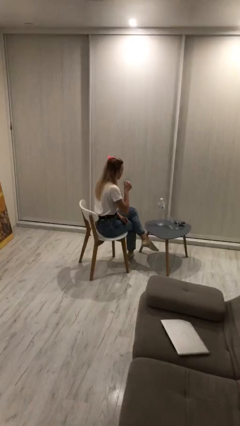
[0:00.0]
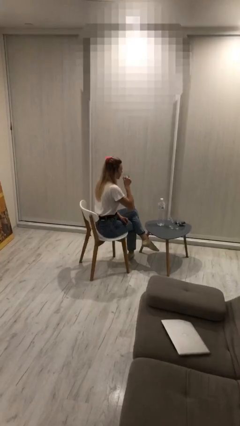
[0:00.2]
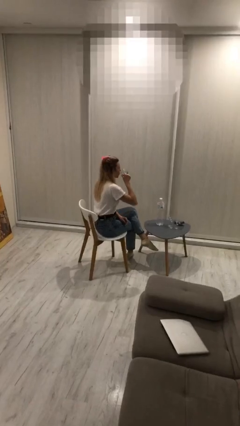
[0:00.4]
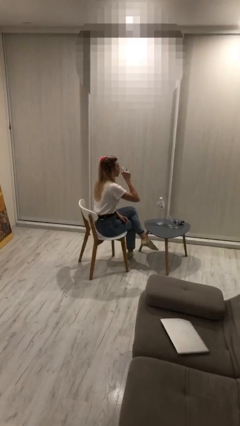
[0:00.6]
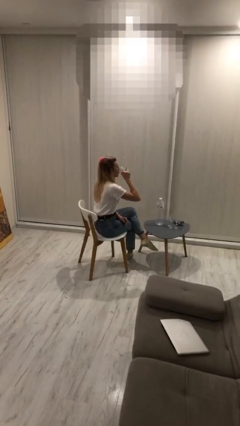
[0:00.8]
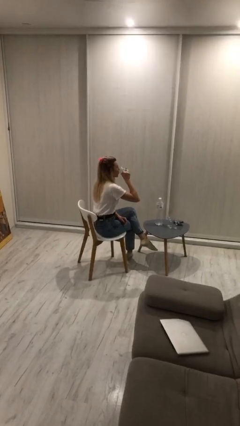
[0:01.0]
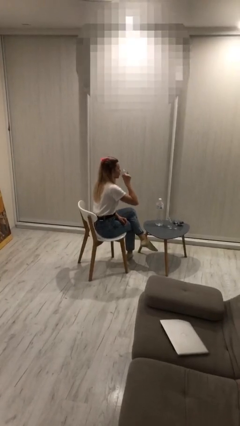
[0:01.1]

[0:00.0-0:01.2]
person drinks from mug

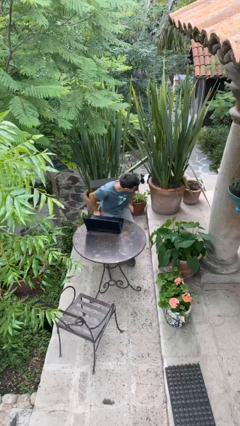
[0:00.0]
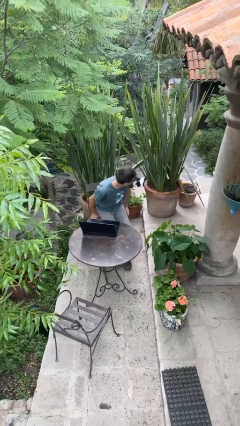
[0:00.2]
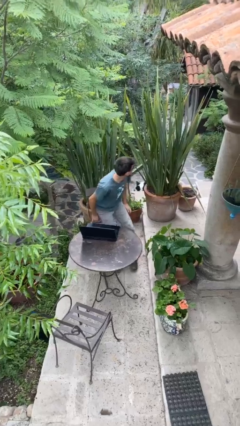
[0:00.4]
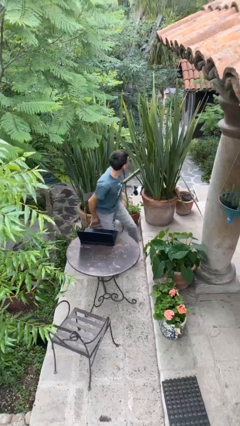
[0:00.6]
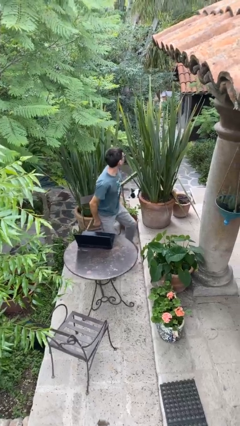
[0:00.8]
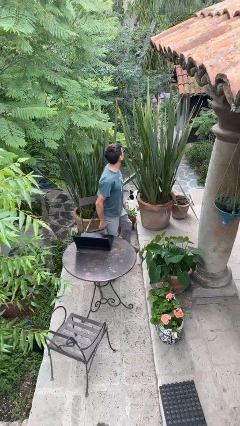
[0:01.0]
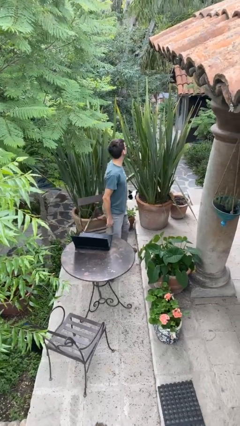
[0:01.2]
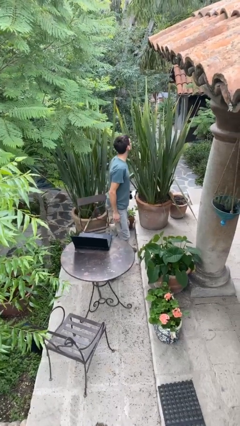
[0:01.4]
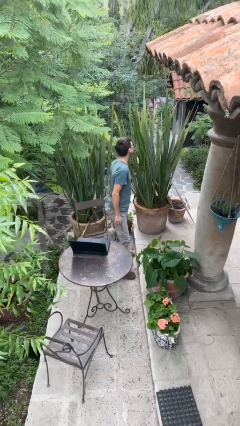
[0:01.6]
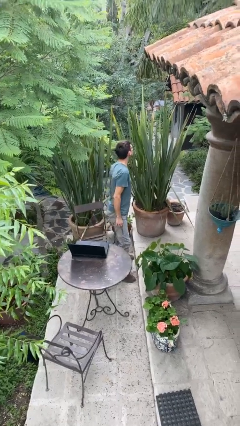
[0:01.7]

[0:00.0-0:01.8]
person stands up

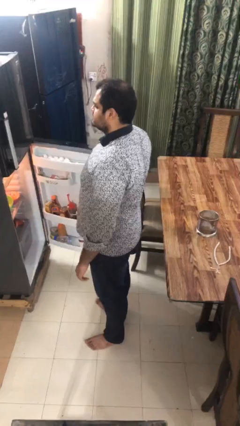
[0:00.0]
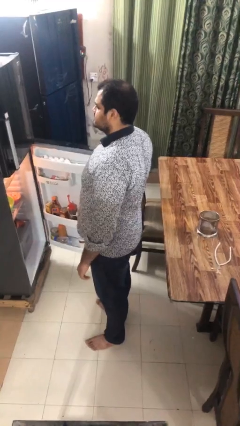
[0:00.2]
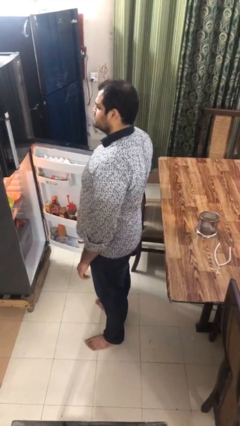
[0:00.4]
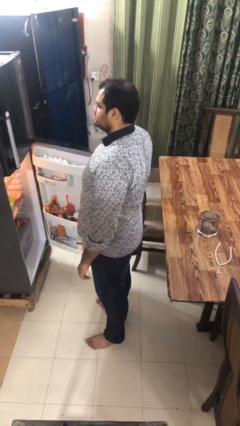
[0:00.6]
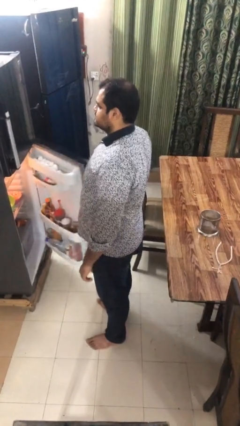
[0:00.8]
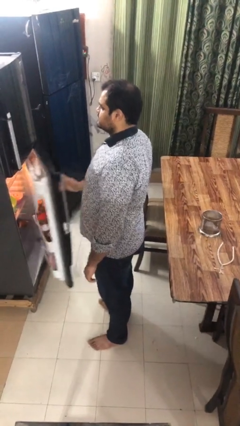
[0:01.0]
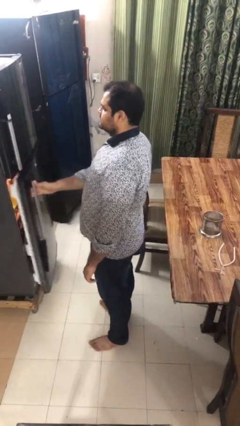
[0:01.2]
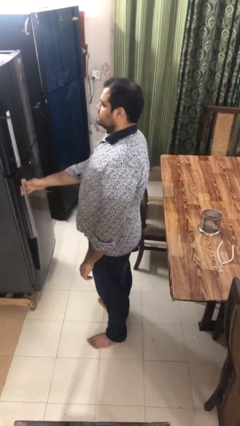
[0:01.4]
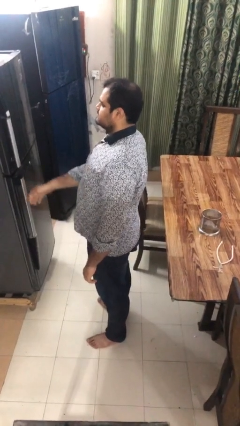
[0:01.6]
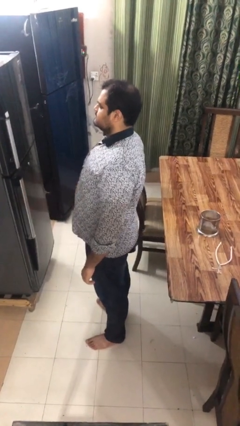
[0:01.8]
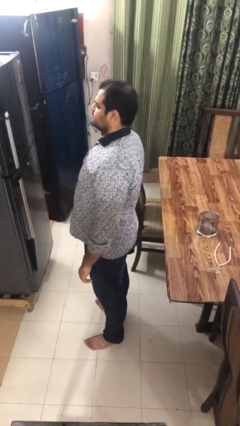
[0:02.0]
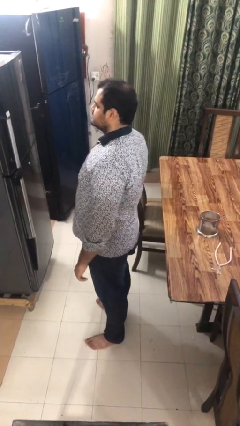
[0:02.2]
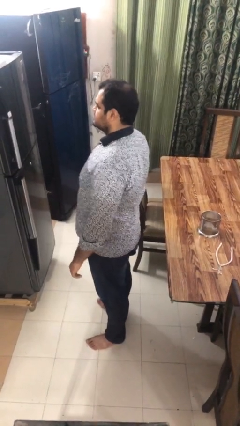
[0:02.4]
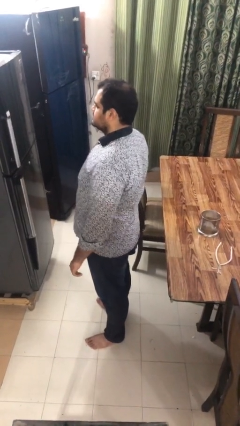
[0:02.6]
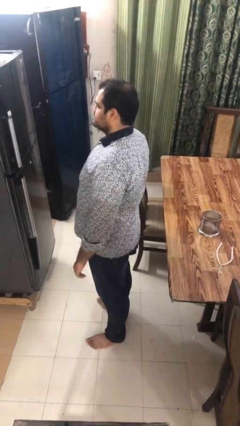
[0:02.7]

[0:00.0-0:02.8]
person closes refrigerator

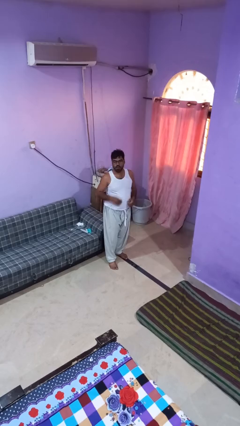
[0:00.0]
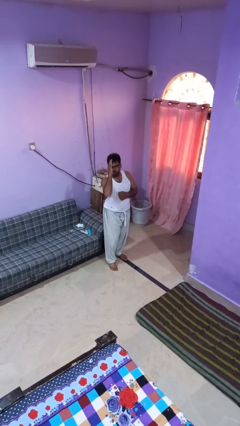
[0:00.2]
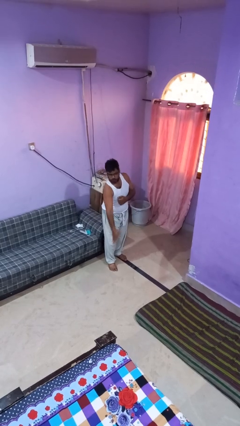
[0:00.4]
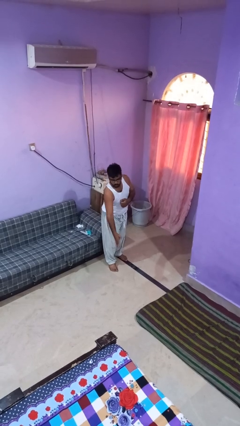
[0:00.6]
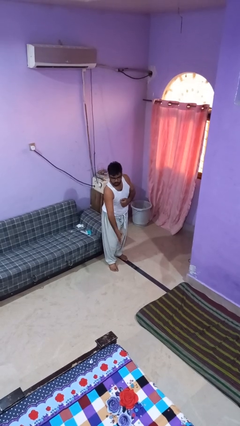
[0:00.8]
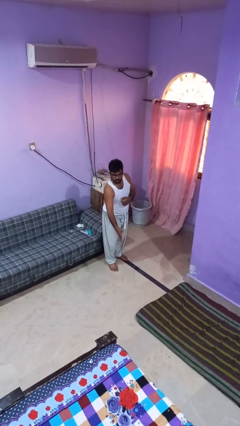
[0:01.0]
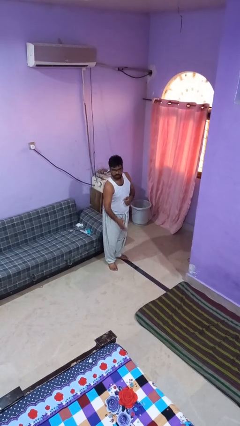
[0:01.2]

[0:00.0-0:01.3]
person karate chop

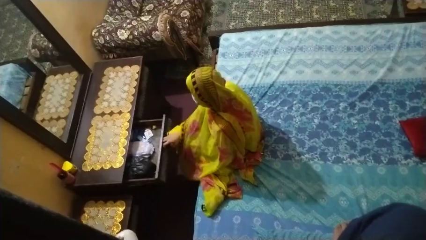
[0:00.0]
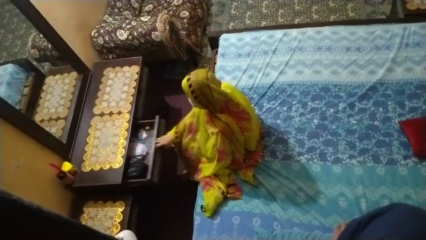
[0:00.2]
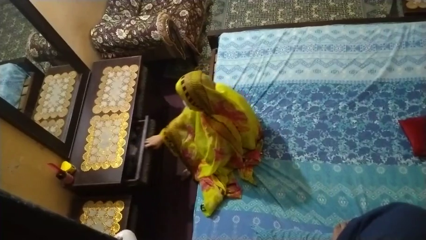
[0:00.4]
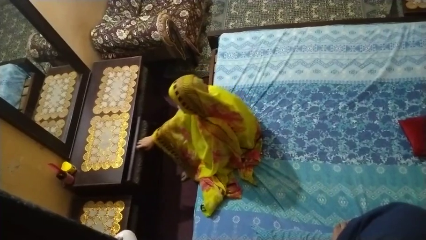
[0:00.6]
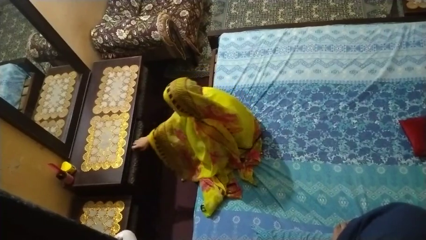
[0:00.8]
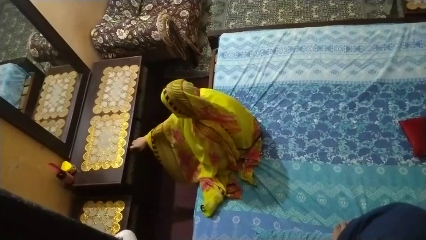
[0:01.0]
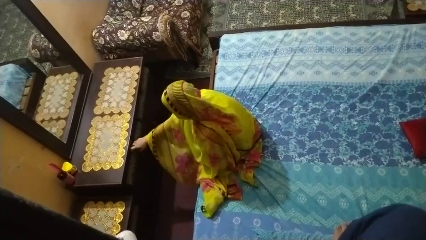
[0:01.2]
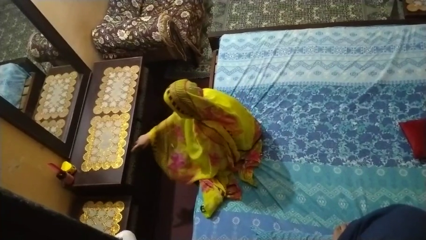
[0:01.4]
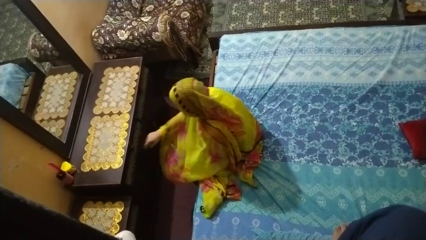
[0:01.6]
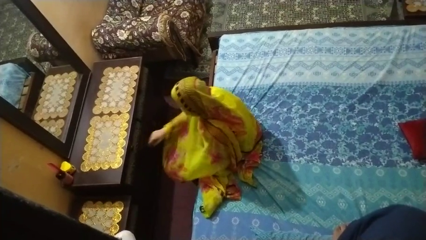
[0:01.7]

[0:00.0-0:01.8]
person closes dresser drawer

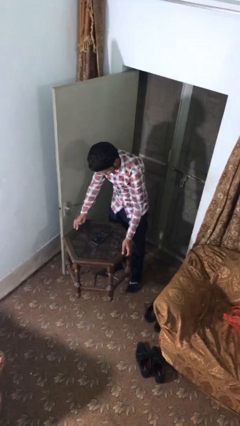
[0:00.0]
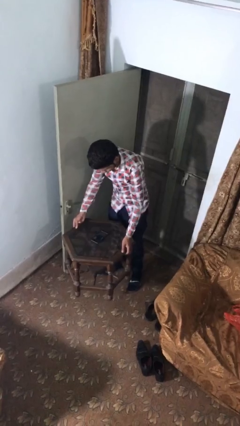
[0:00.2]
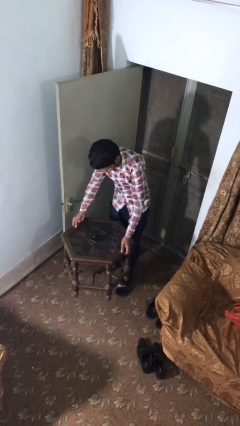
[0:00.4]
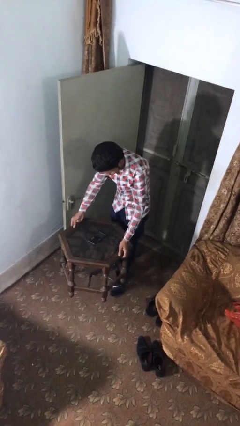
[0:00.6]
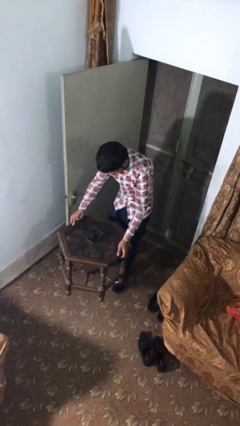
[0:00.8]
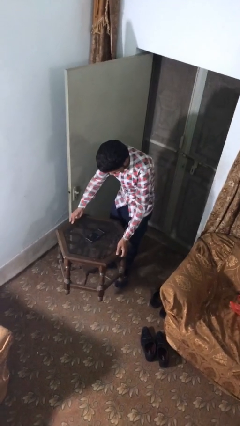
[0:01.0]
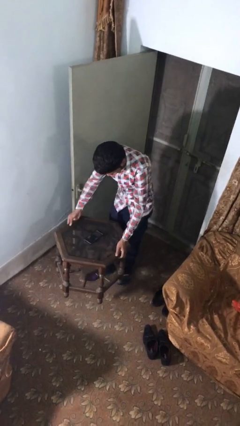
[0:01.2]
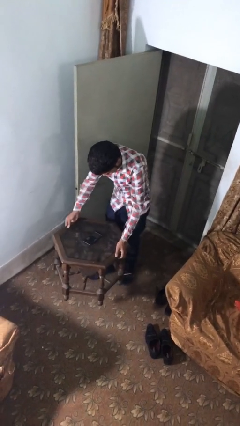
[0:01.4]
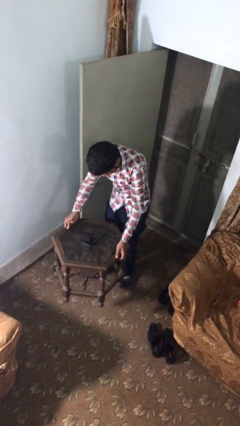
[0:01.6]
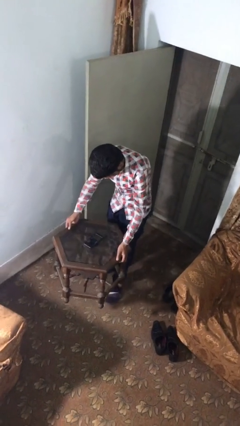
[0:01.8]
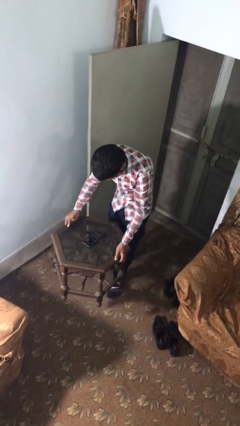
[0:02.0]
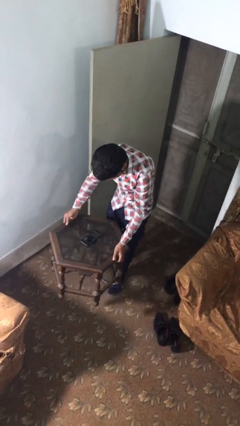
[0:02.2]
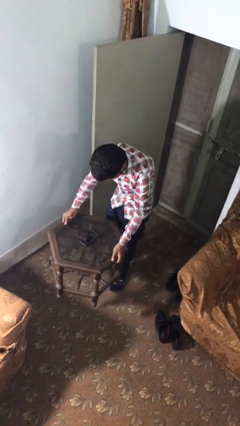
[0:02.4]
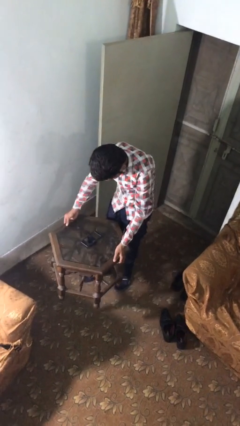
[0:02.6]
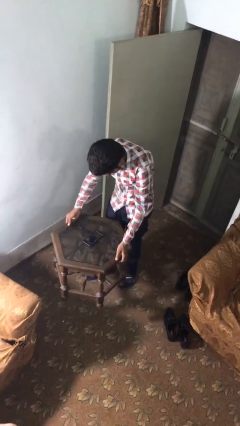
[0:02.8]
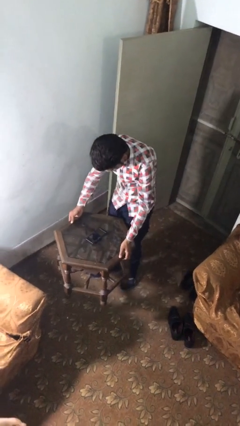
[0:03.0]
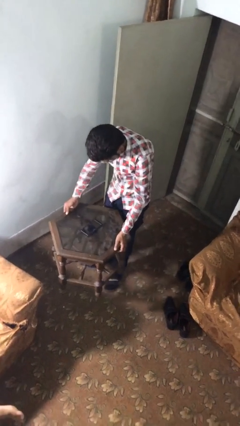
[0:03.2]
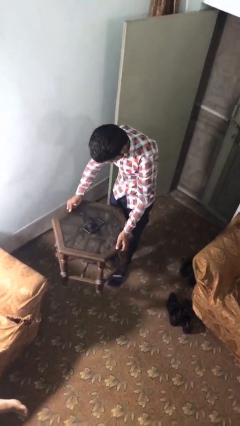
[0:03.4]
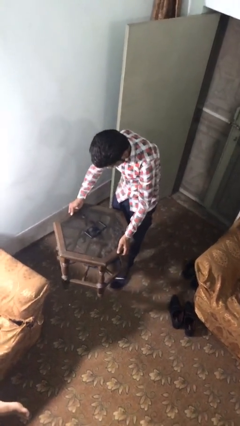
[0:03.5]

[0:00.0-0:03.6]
person carries heavy object

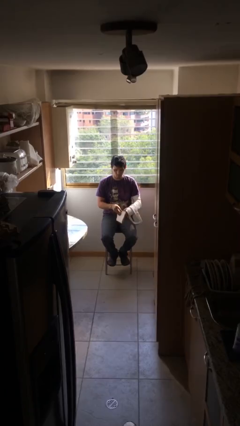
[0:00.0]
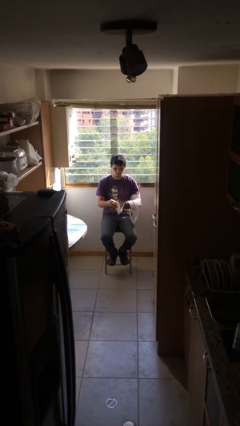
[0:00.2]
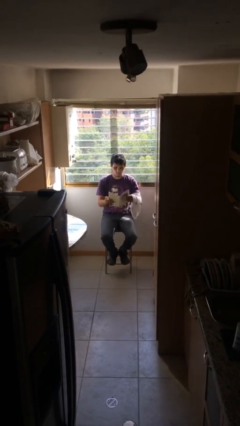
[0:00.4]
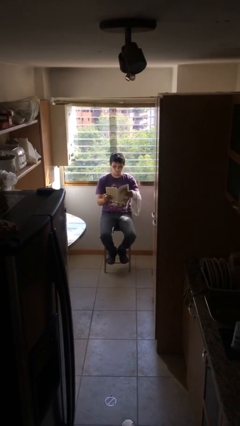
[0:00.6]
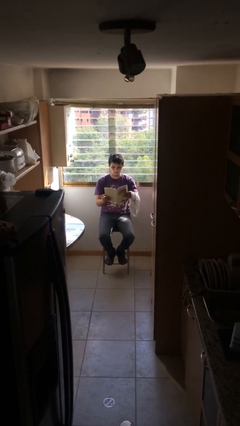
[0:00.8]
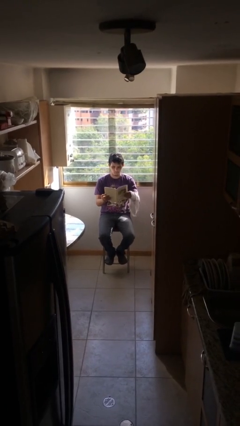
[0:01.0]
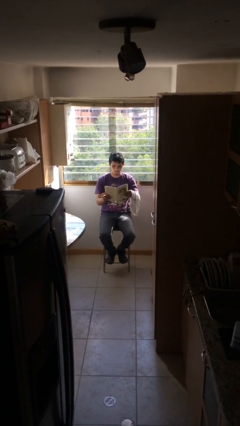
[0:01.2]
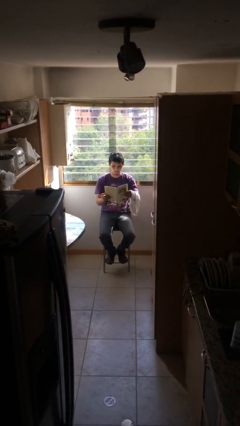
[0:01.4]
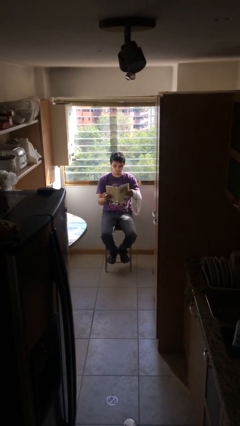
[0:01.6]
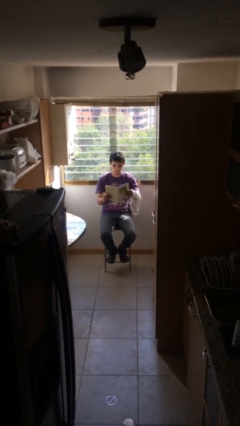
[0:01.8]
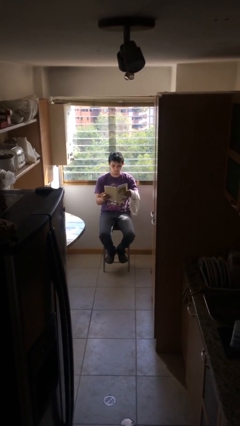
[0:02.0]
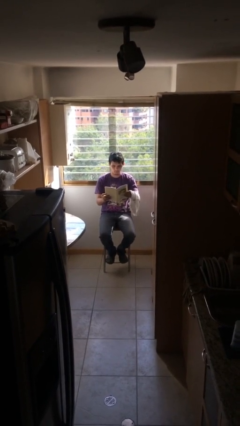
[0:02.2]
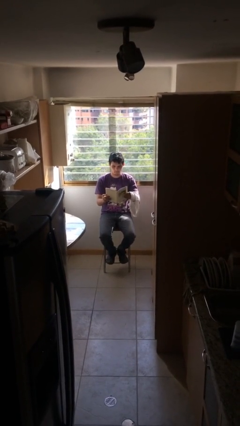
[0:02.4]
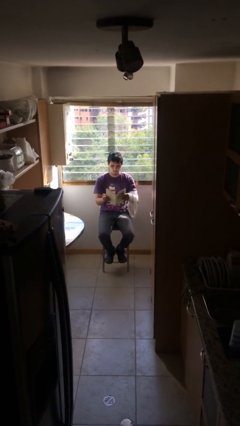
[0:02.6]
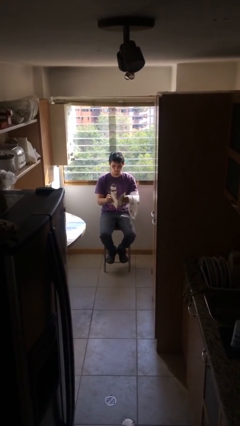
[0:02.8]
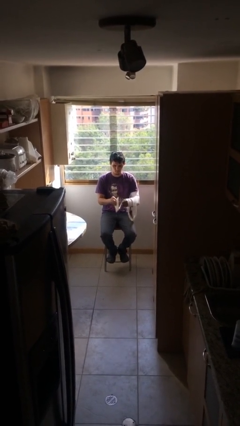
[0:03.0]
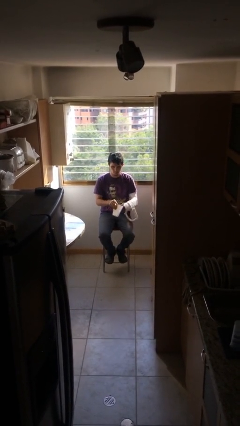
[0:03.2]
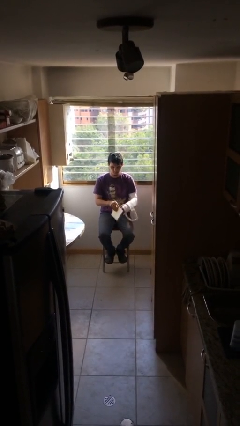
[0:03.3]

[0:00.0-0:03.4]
person reads document

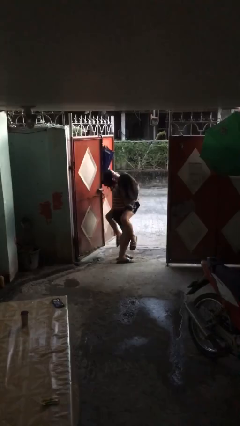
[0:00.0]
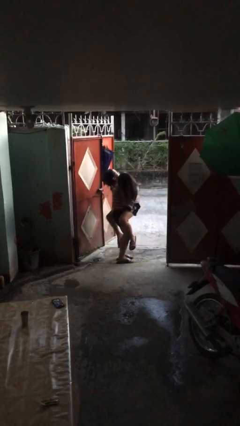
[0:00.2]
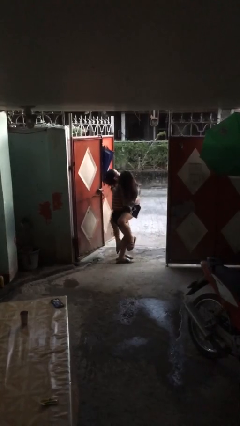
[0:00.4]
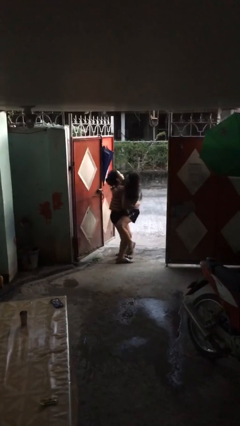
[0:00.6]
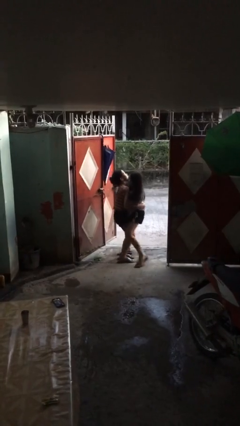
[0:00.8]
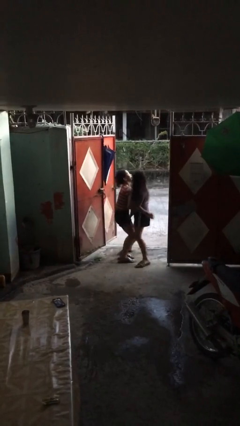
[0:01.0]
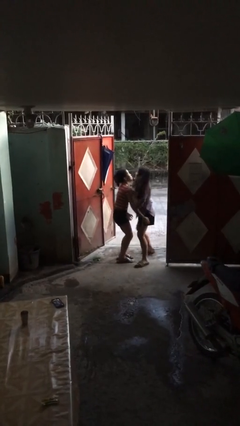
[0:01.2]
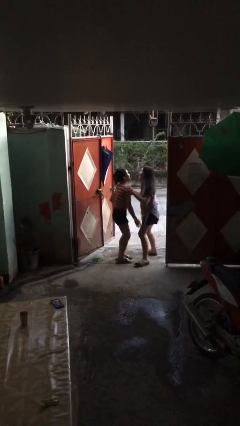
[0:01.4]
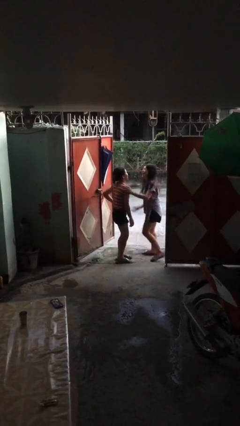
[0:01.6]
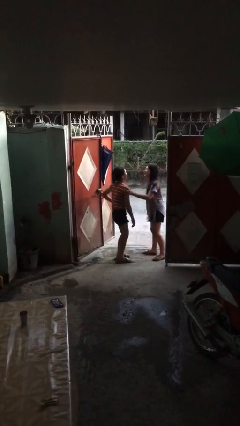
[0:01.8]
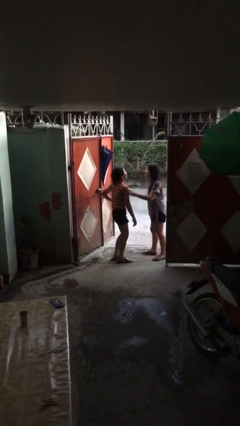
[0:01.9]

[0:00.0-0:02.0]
person puts down person
